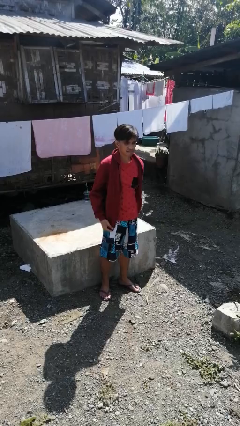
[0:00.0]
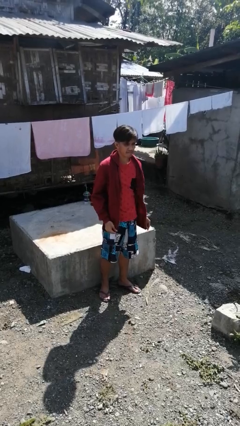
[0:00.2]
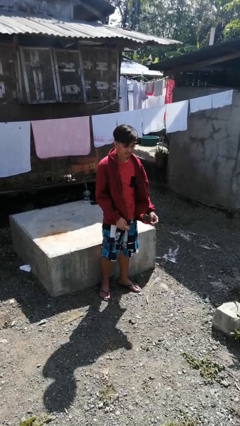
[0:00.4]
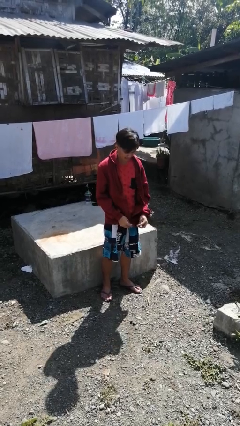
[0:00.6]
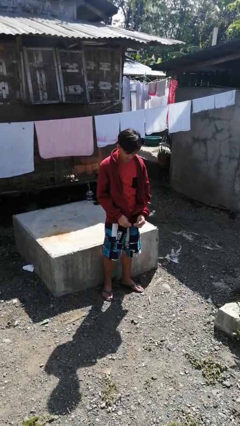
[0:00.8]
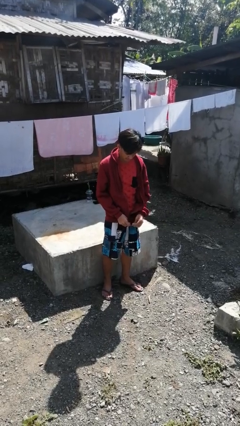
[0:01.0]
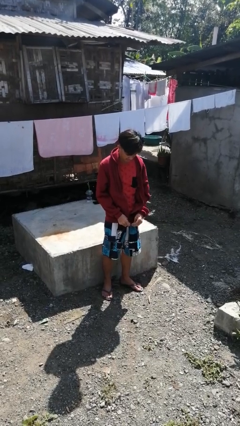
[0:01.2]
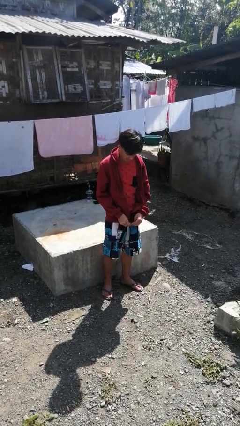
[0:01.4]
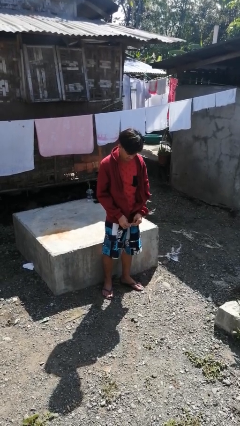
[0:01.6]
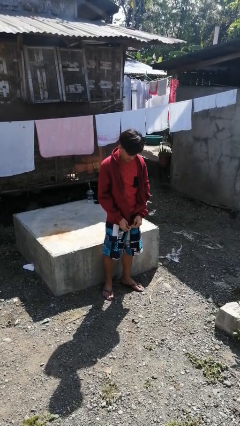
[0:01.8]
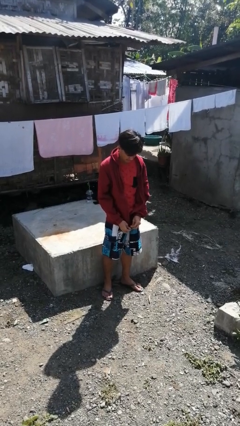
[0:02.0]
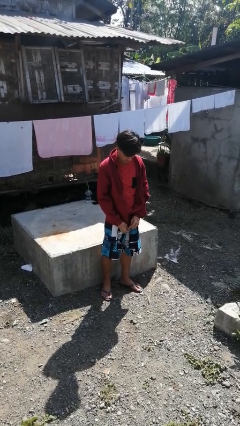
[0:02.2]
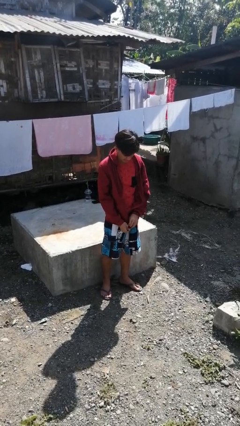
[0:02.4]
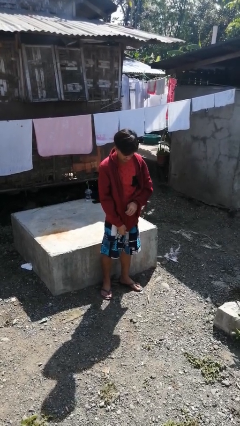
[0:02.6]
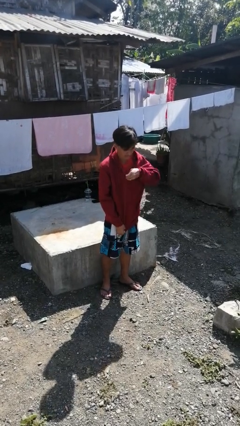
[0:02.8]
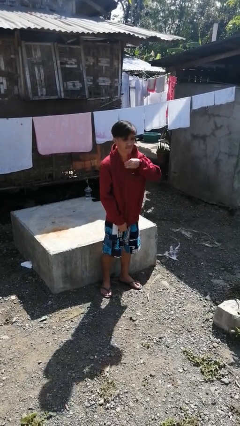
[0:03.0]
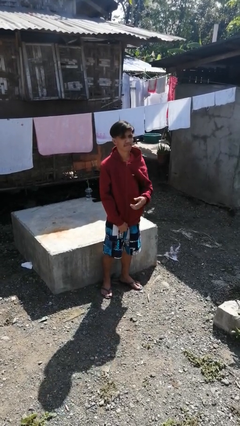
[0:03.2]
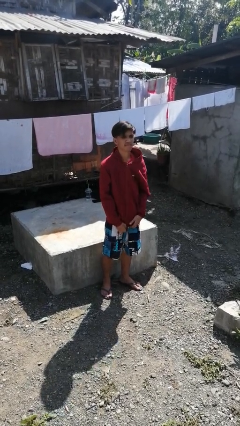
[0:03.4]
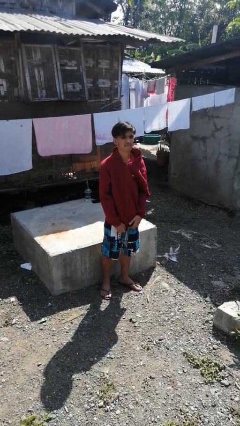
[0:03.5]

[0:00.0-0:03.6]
person zips up jacket

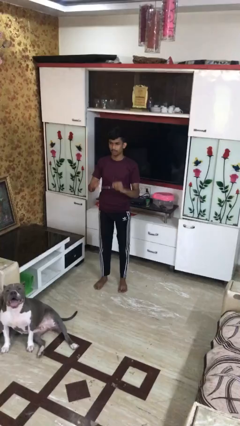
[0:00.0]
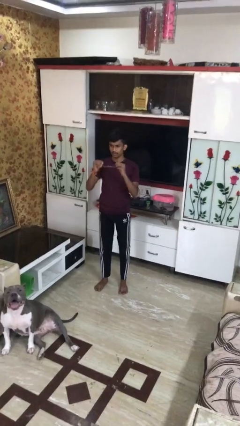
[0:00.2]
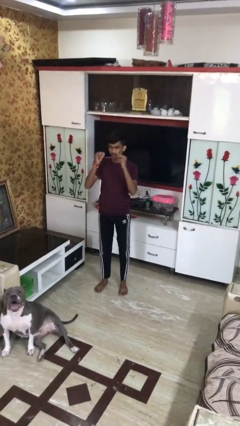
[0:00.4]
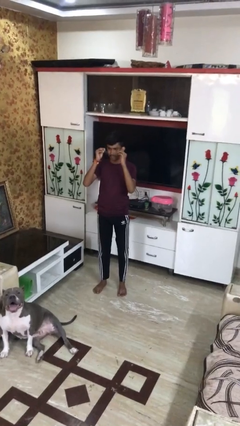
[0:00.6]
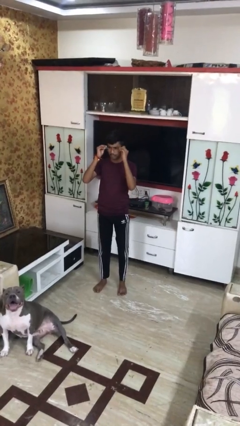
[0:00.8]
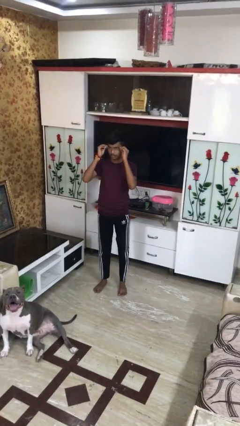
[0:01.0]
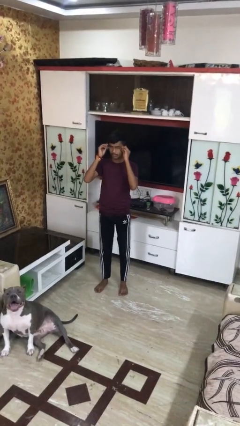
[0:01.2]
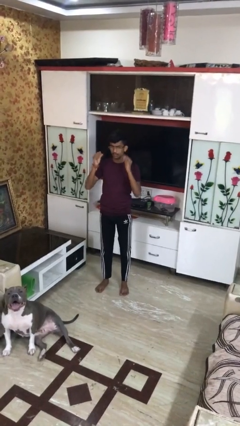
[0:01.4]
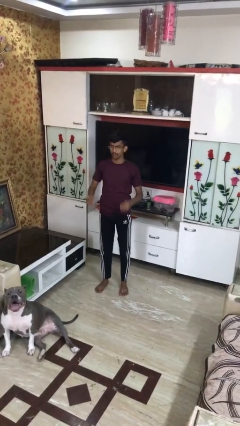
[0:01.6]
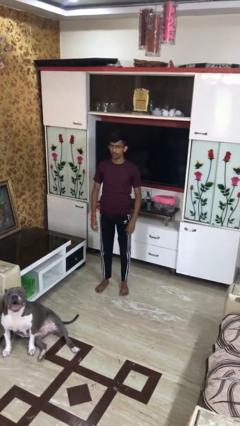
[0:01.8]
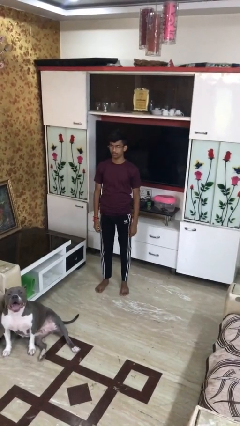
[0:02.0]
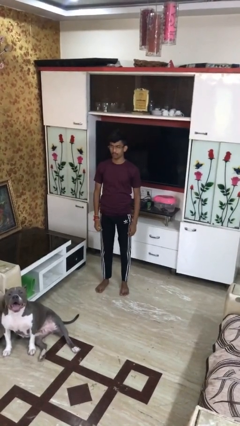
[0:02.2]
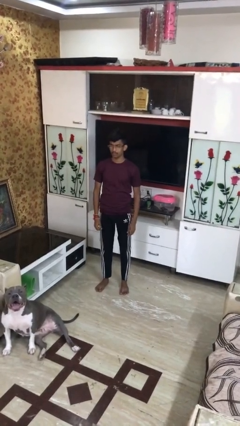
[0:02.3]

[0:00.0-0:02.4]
person puts on glasses

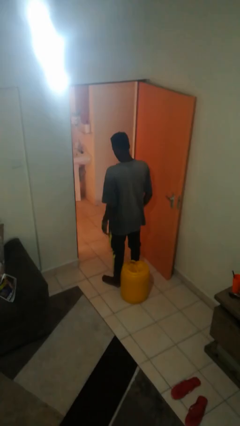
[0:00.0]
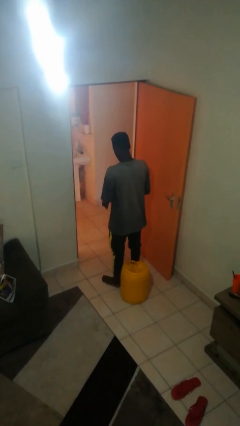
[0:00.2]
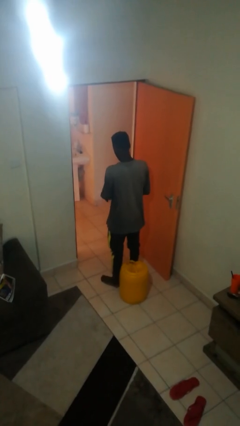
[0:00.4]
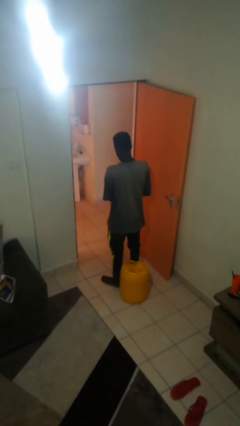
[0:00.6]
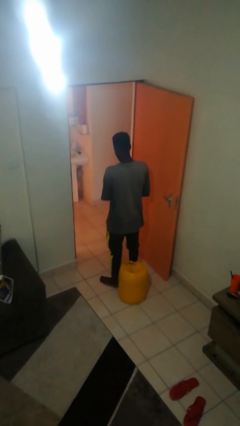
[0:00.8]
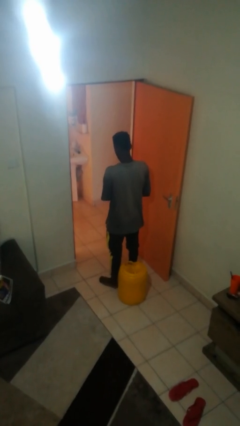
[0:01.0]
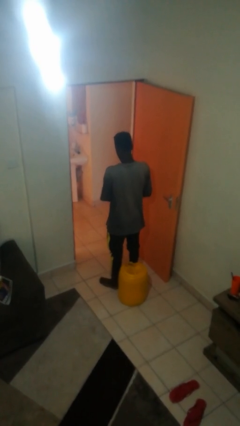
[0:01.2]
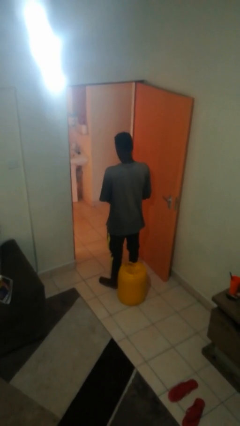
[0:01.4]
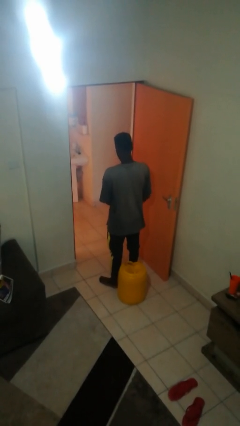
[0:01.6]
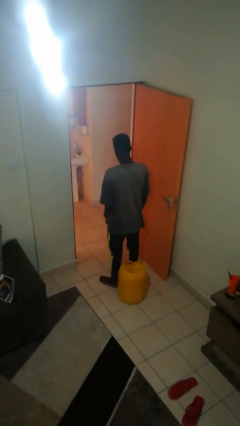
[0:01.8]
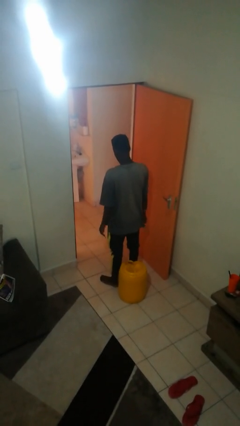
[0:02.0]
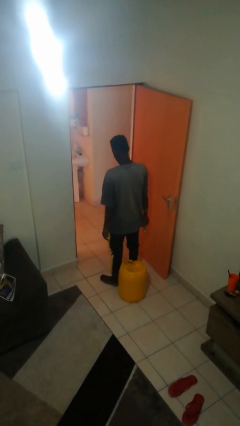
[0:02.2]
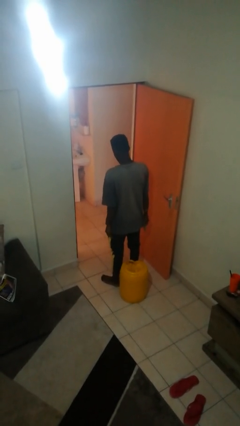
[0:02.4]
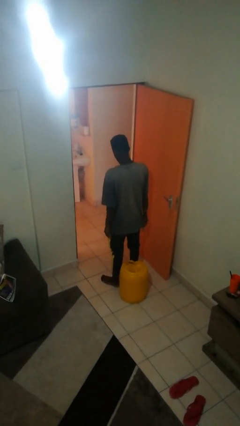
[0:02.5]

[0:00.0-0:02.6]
person takes off wristwatch

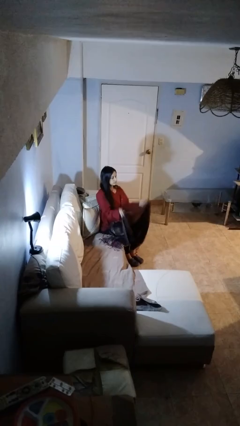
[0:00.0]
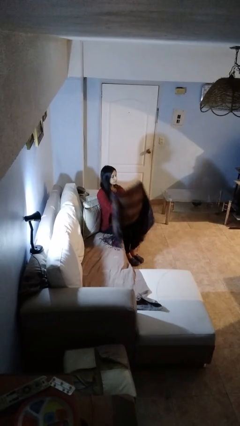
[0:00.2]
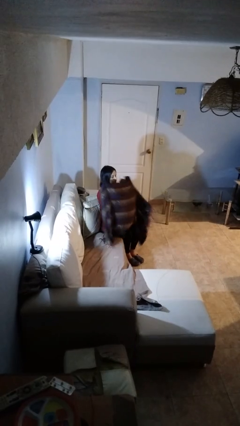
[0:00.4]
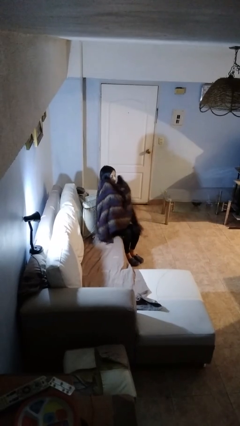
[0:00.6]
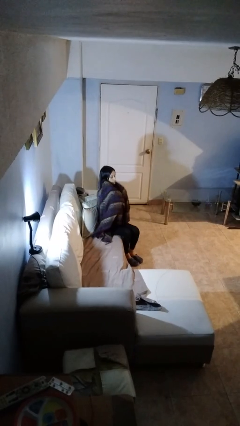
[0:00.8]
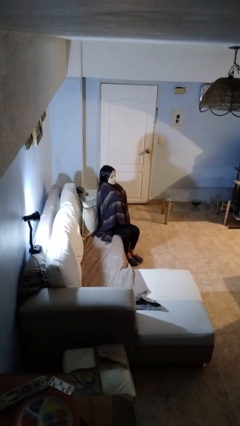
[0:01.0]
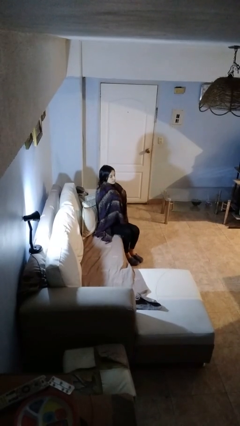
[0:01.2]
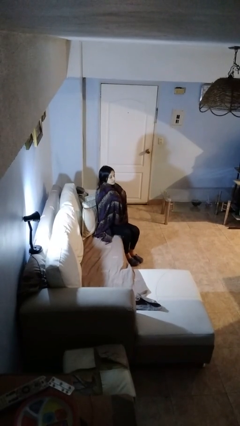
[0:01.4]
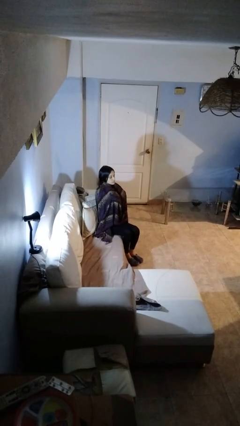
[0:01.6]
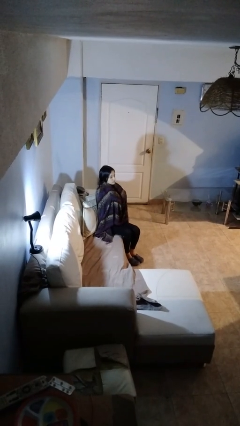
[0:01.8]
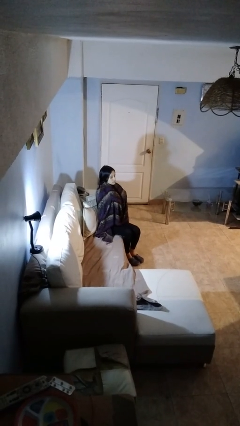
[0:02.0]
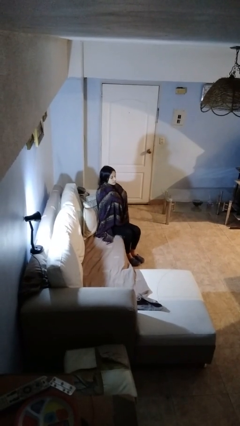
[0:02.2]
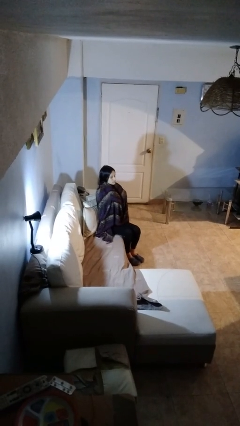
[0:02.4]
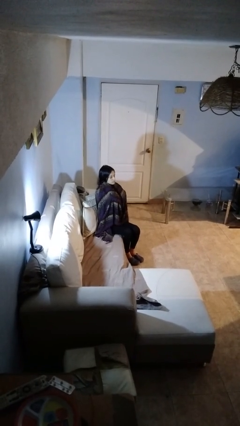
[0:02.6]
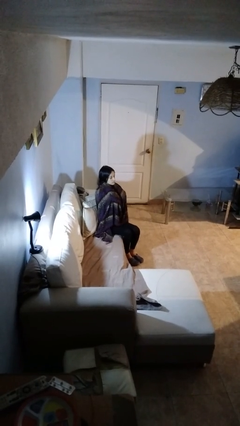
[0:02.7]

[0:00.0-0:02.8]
person covers with blanket

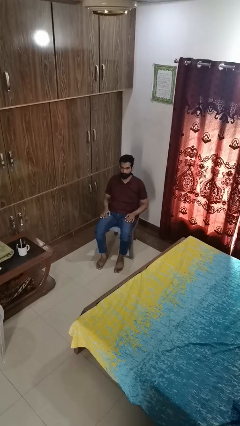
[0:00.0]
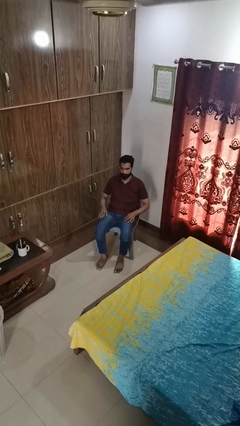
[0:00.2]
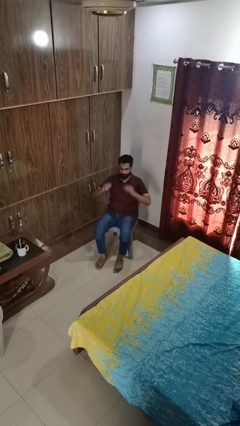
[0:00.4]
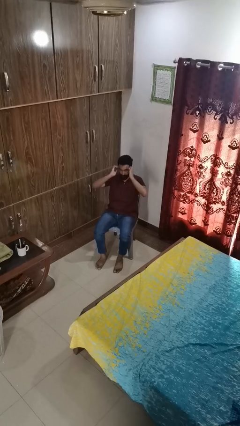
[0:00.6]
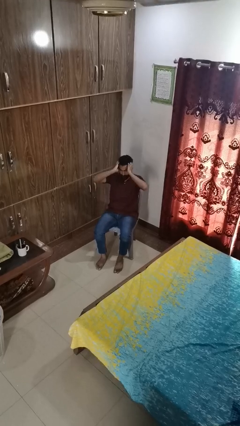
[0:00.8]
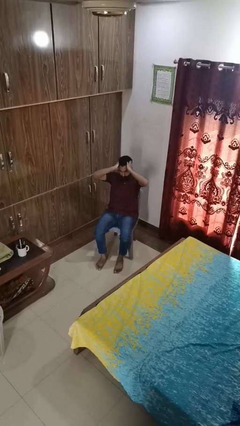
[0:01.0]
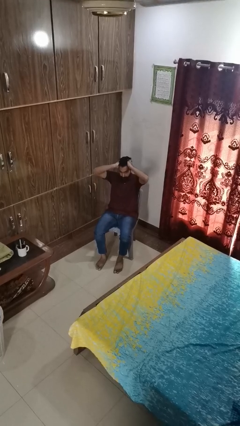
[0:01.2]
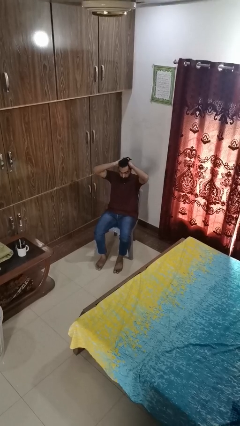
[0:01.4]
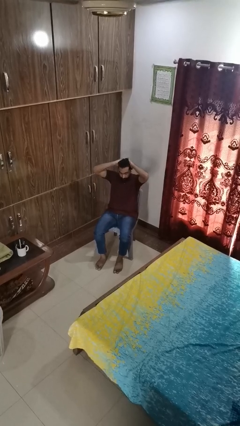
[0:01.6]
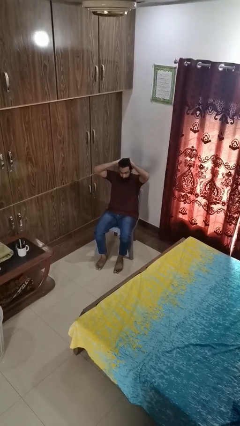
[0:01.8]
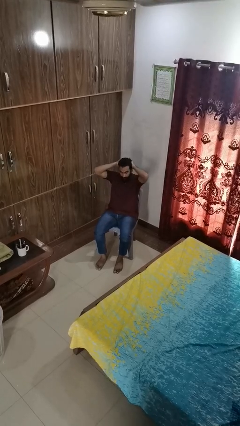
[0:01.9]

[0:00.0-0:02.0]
person strokes hair

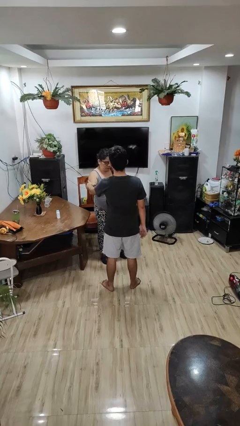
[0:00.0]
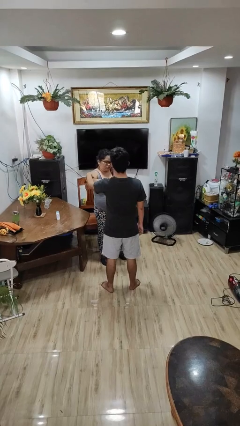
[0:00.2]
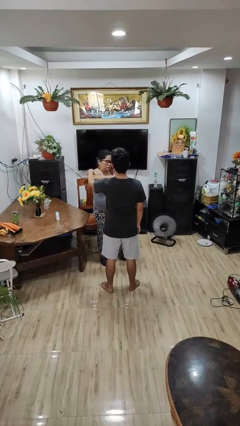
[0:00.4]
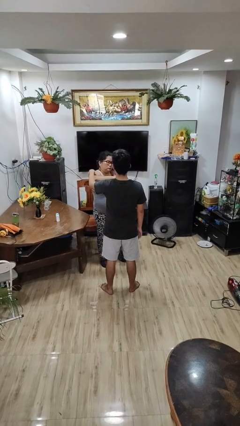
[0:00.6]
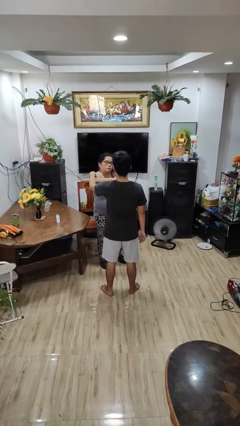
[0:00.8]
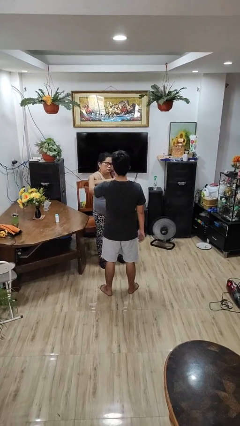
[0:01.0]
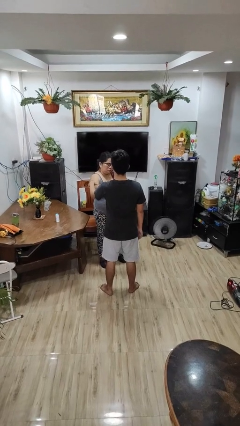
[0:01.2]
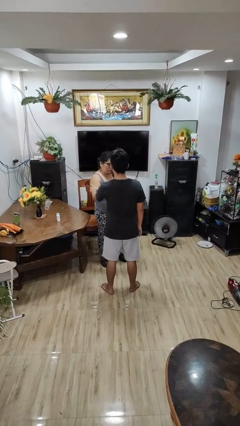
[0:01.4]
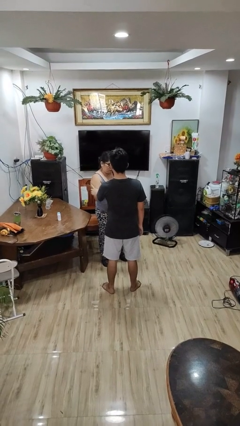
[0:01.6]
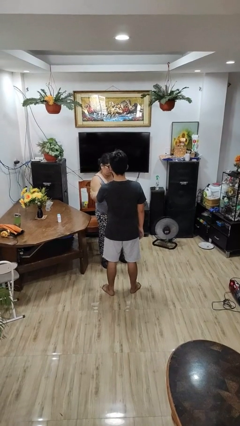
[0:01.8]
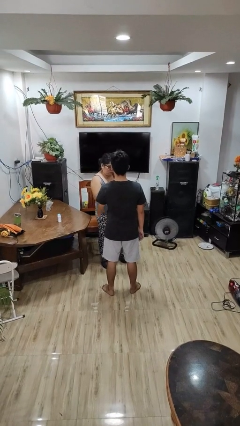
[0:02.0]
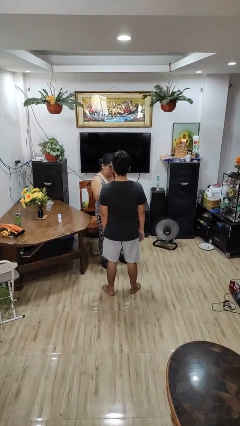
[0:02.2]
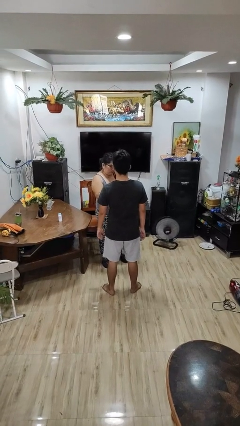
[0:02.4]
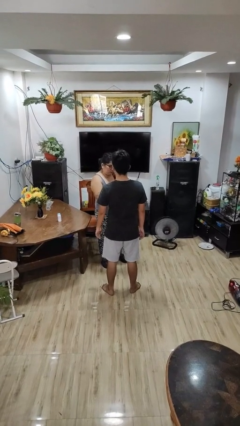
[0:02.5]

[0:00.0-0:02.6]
person grabs person by bicep

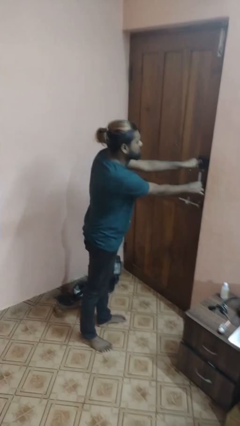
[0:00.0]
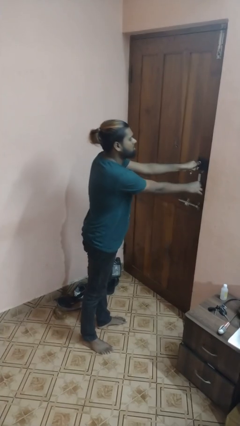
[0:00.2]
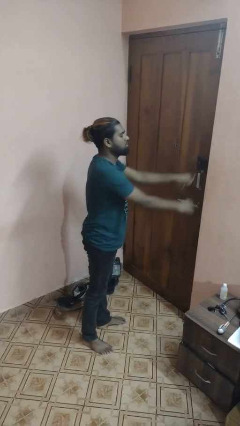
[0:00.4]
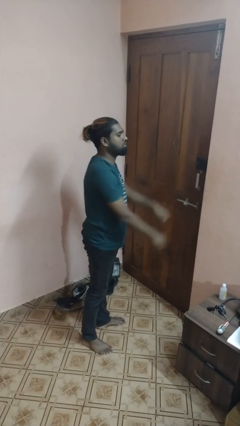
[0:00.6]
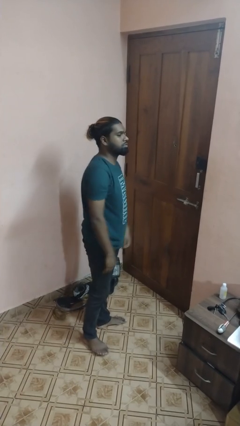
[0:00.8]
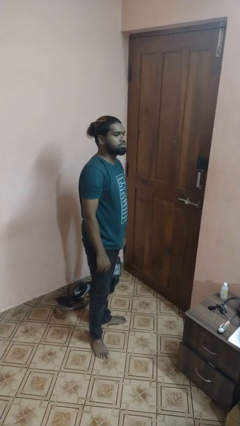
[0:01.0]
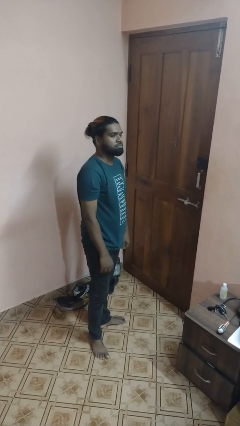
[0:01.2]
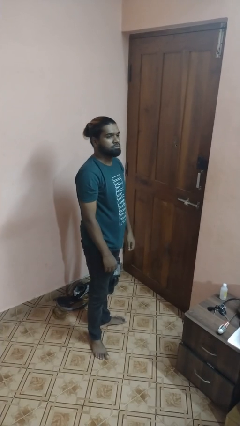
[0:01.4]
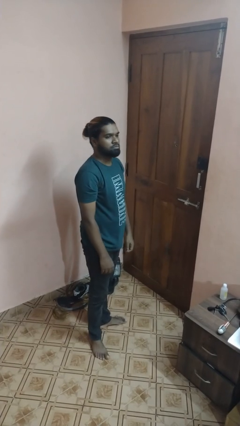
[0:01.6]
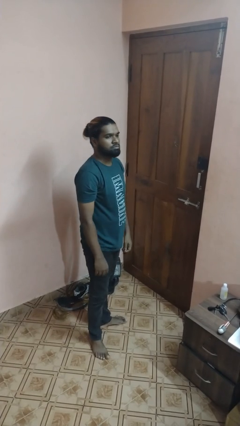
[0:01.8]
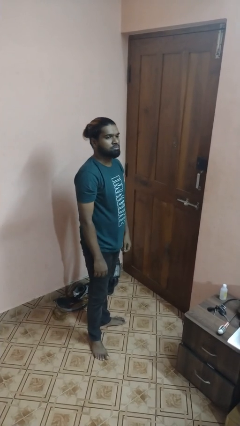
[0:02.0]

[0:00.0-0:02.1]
person locks door with keys
